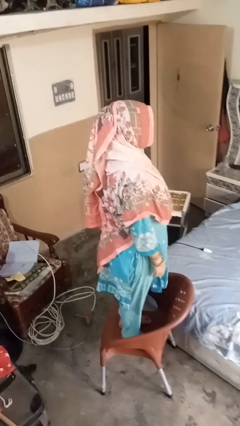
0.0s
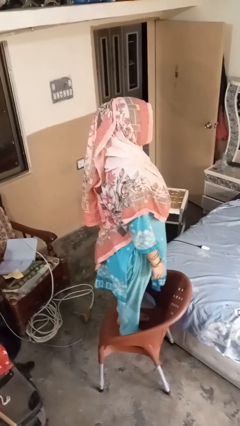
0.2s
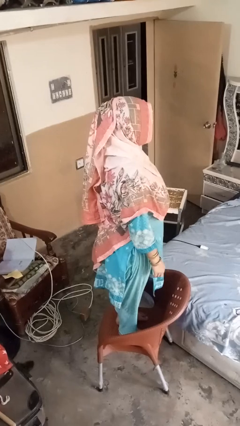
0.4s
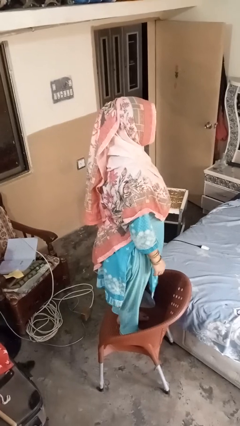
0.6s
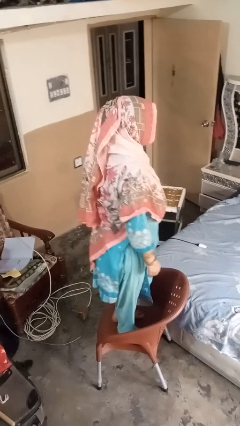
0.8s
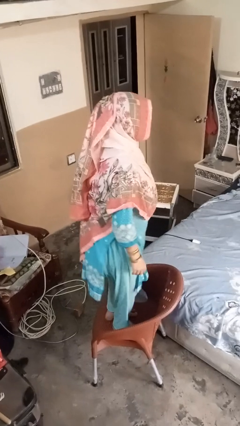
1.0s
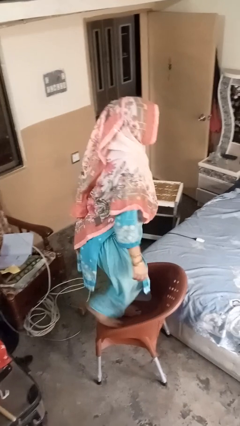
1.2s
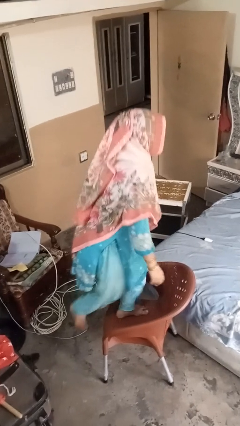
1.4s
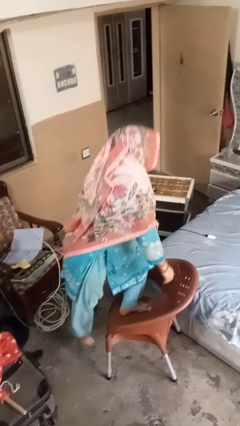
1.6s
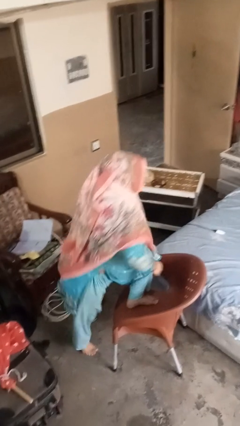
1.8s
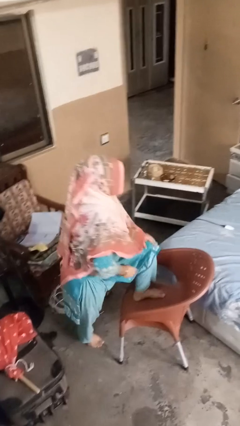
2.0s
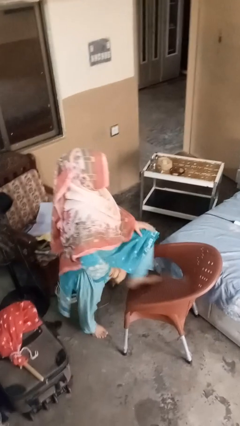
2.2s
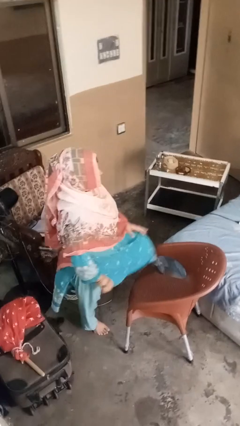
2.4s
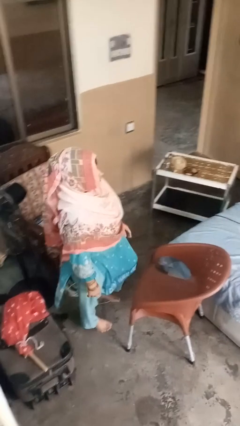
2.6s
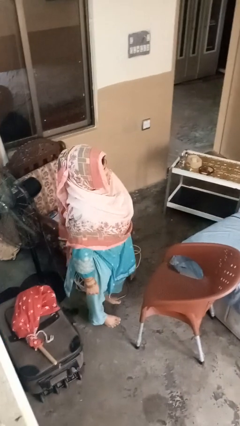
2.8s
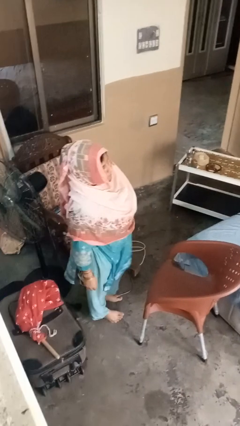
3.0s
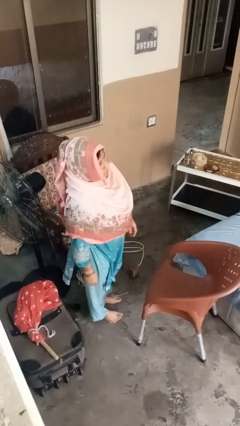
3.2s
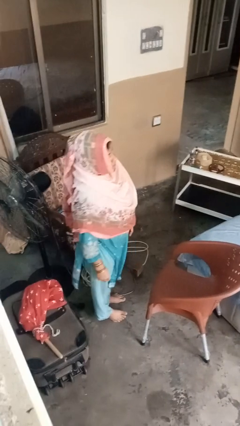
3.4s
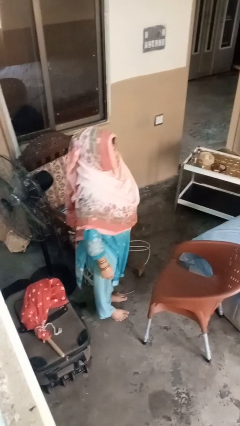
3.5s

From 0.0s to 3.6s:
person climbs off chair

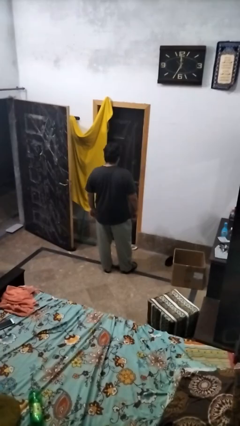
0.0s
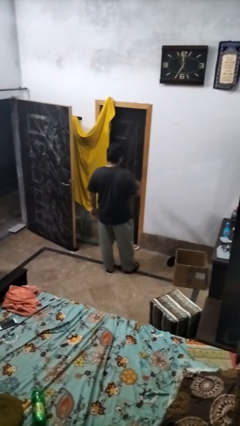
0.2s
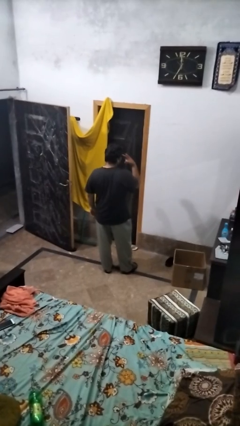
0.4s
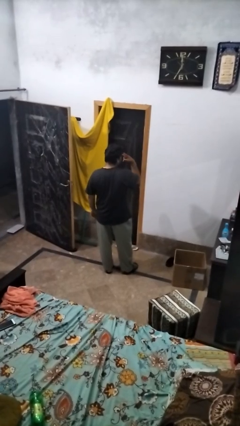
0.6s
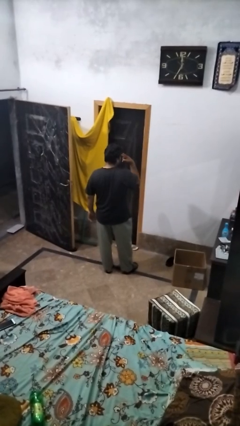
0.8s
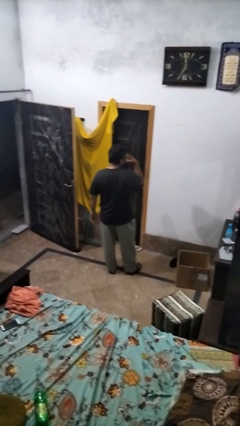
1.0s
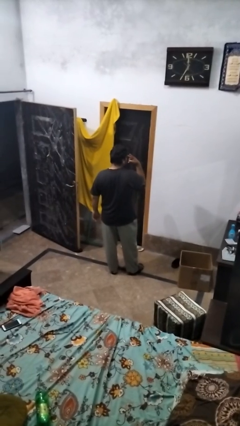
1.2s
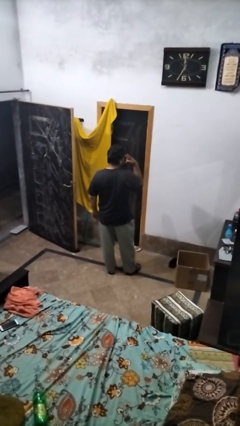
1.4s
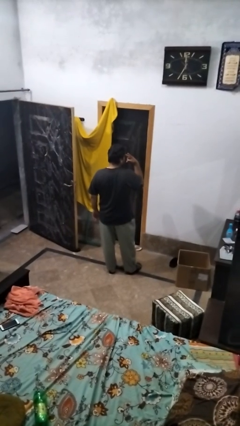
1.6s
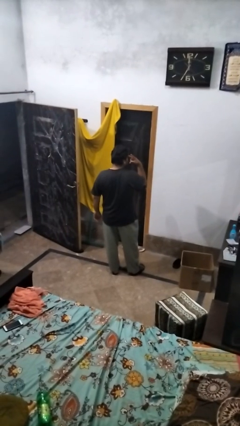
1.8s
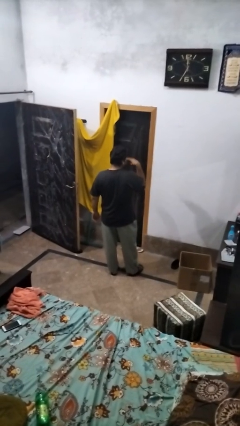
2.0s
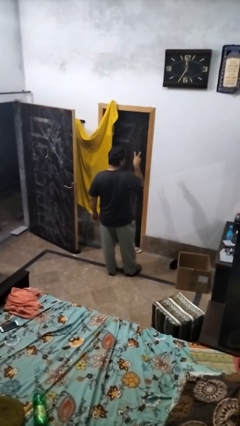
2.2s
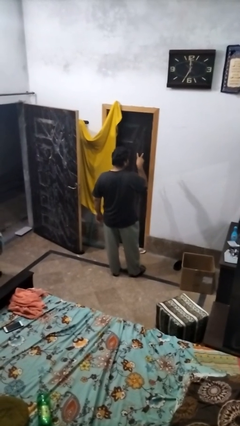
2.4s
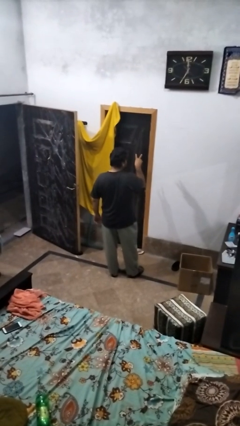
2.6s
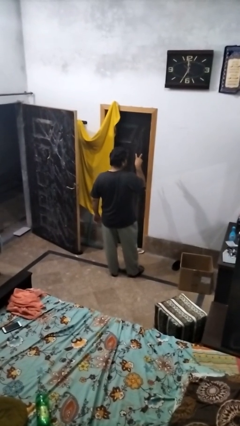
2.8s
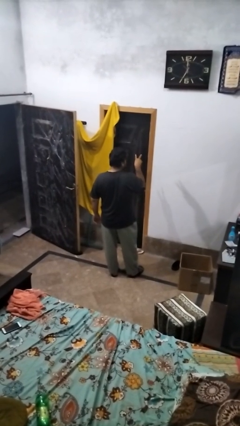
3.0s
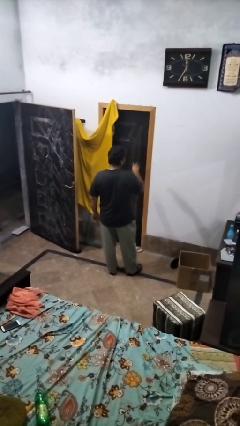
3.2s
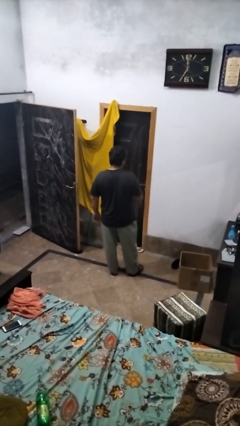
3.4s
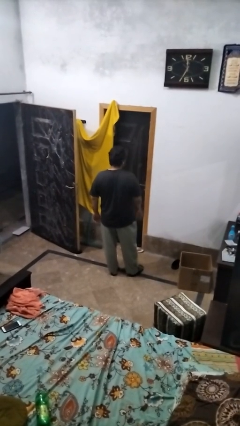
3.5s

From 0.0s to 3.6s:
person gestures watch closely

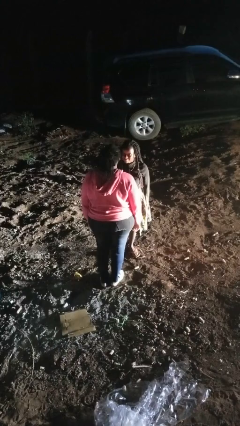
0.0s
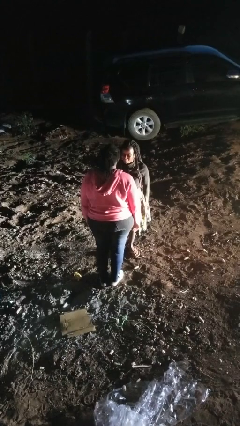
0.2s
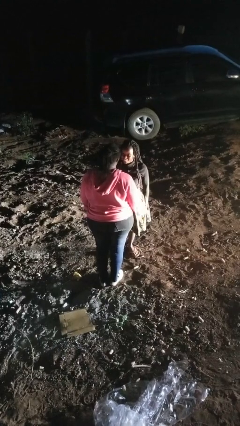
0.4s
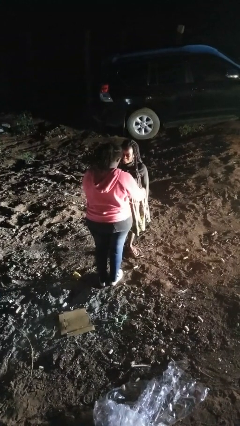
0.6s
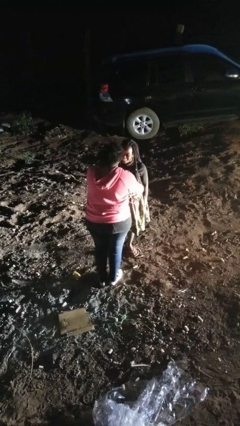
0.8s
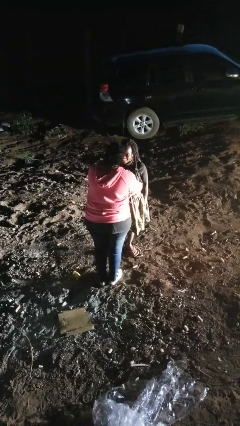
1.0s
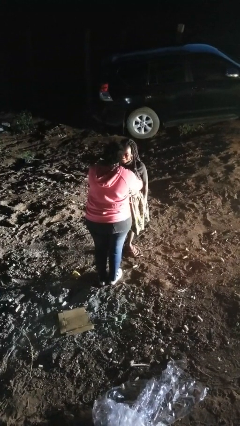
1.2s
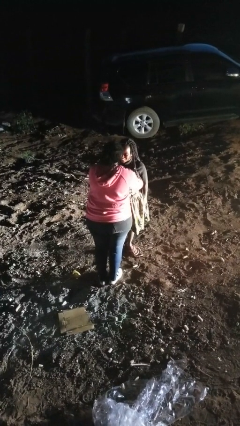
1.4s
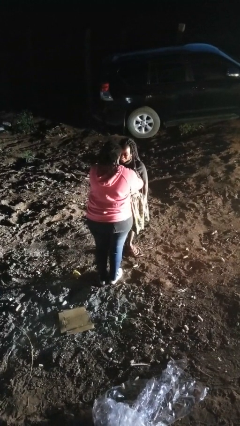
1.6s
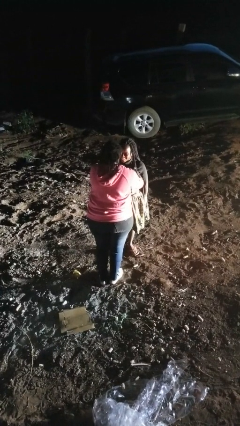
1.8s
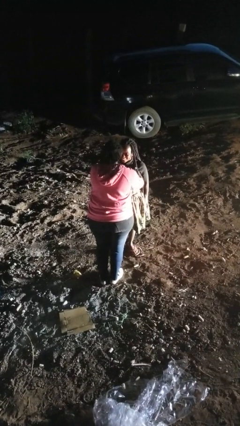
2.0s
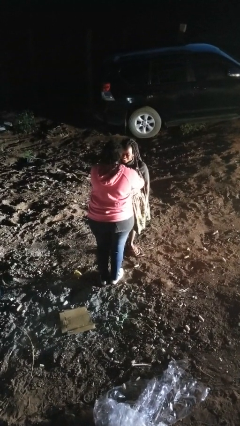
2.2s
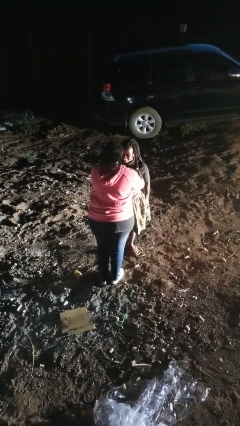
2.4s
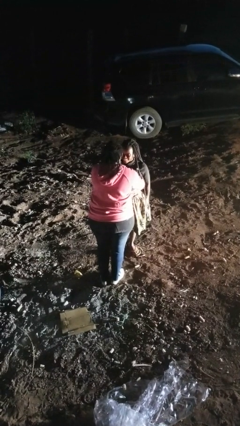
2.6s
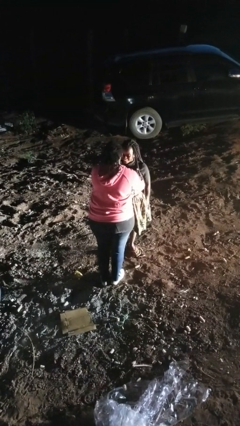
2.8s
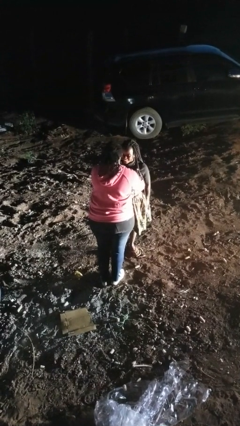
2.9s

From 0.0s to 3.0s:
person tickles person

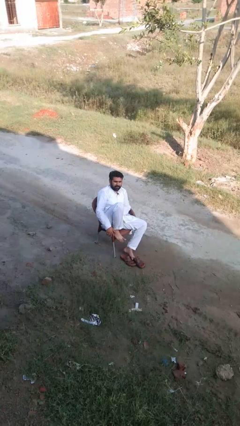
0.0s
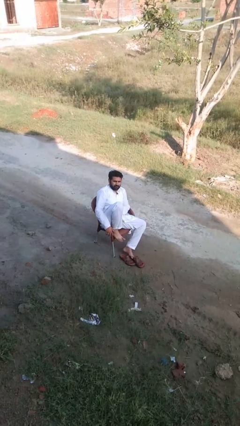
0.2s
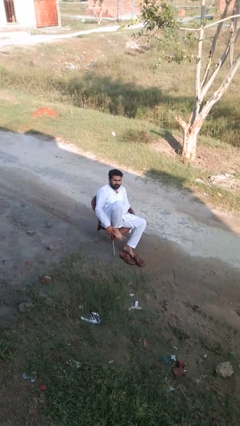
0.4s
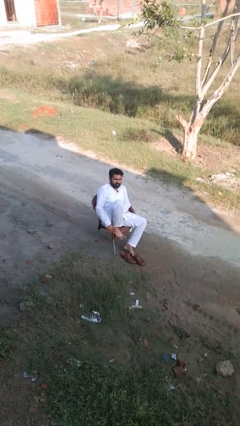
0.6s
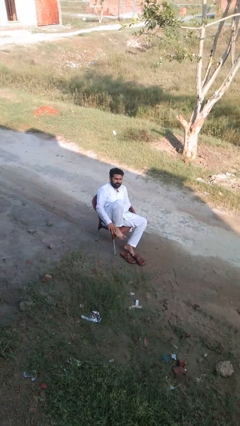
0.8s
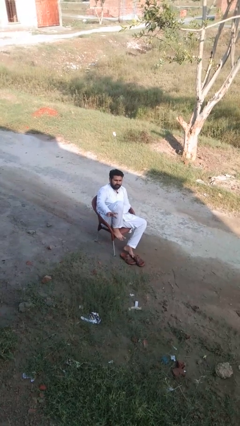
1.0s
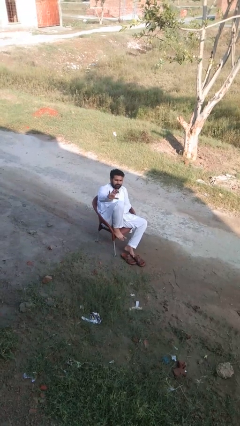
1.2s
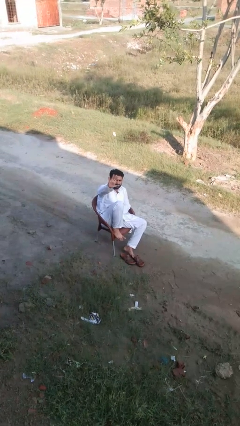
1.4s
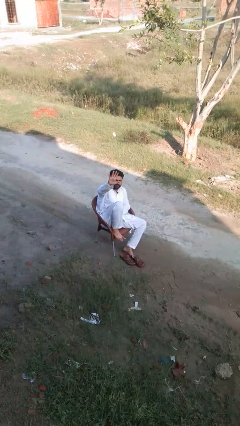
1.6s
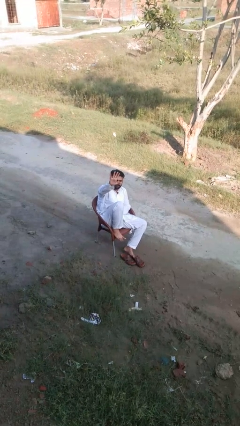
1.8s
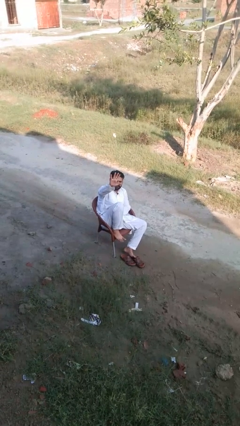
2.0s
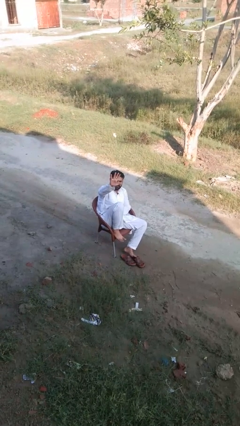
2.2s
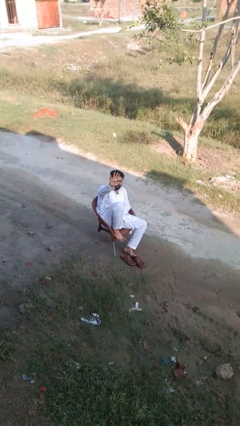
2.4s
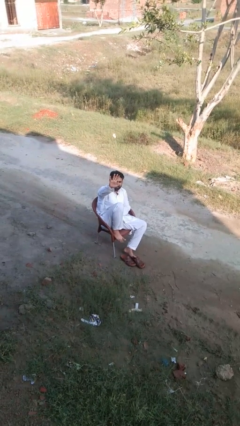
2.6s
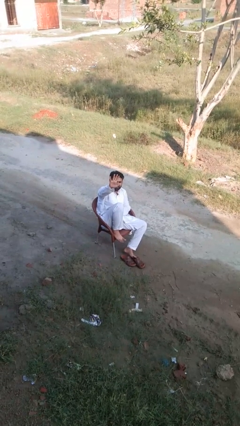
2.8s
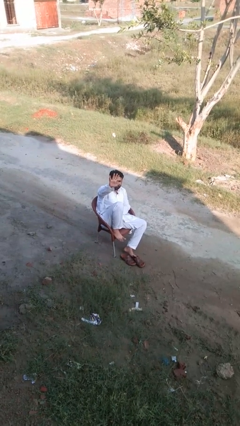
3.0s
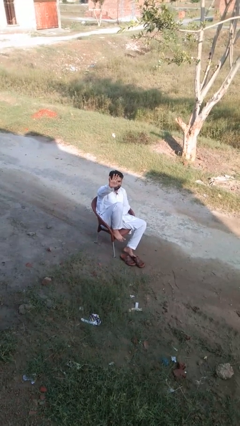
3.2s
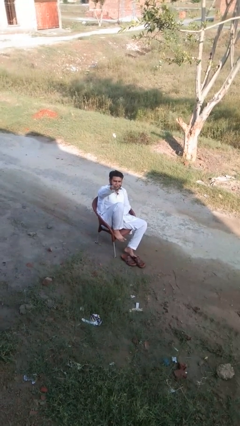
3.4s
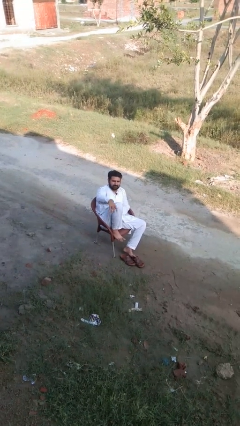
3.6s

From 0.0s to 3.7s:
person gestures number five

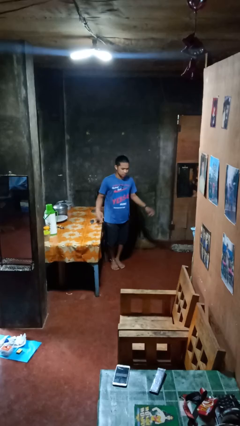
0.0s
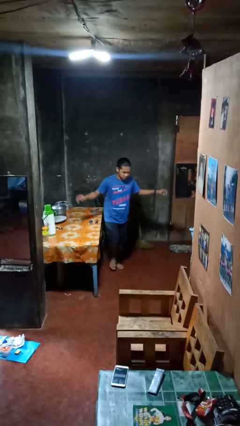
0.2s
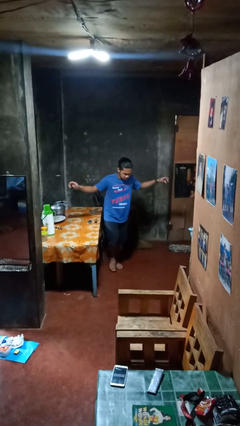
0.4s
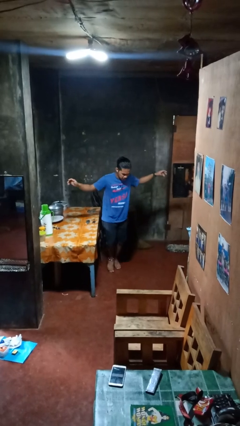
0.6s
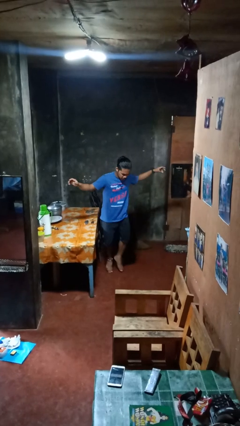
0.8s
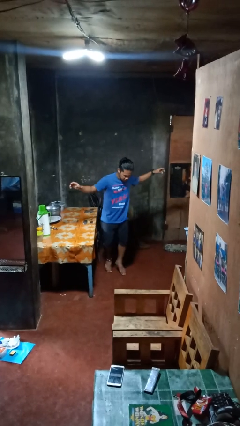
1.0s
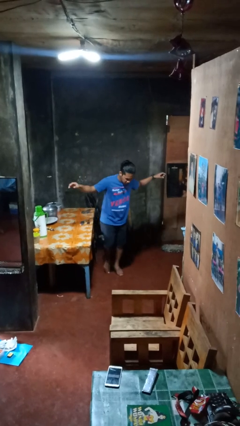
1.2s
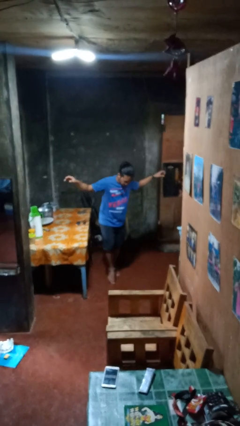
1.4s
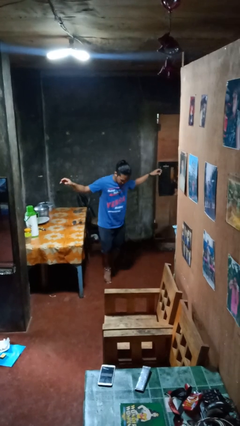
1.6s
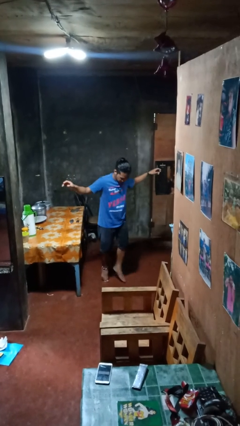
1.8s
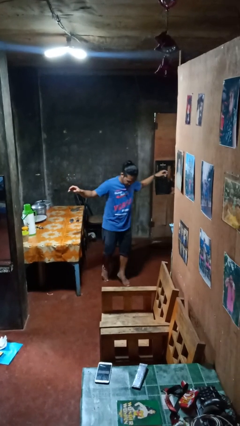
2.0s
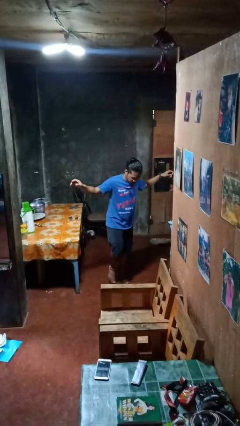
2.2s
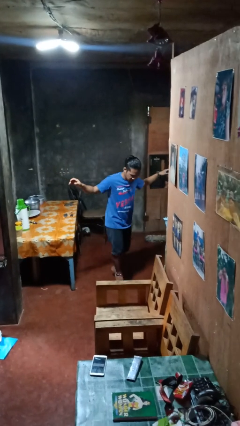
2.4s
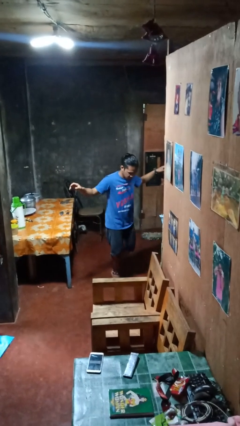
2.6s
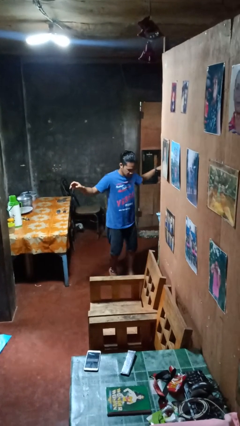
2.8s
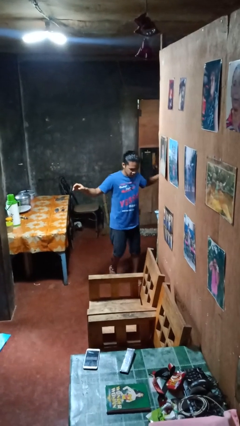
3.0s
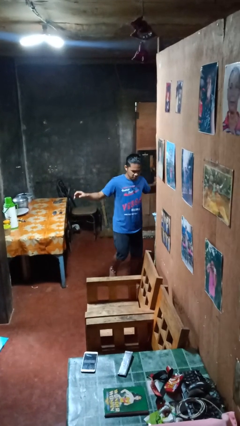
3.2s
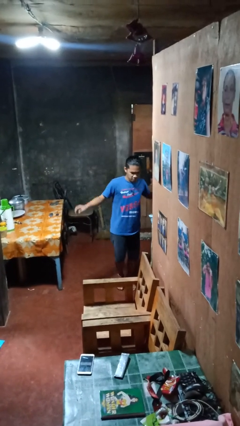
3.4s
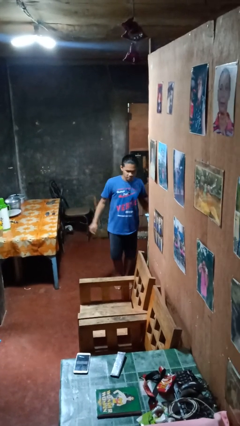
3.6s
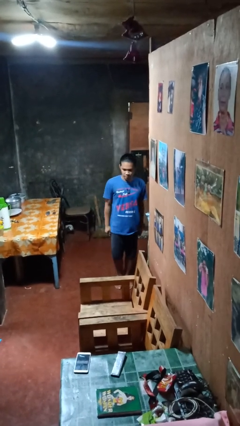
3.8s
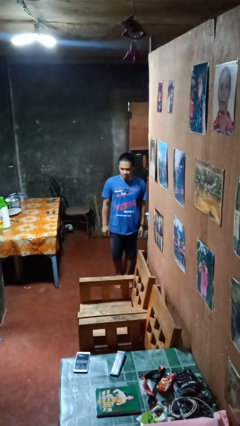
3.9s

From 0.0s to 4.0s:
person walks tiptoe

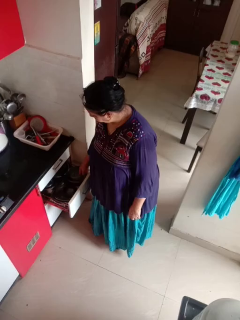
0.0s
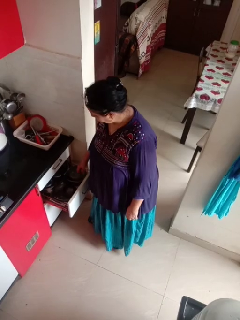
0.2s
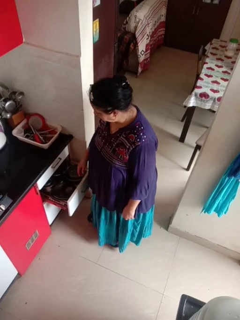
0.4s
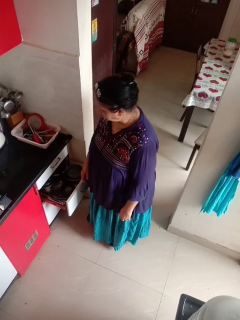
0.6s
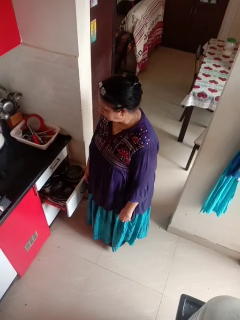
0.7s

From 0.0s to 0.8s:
person puts object into kitchen drawer
